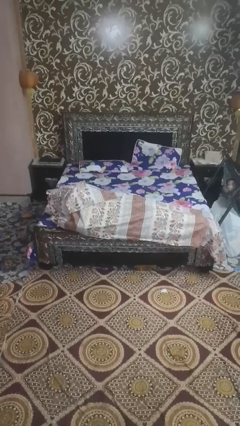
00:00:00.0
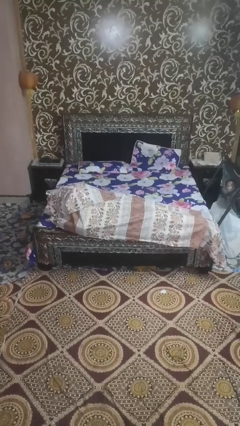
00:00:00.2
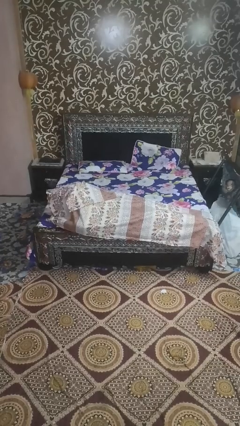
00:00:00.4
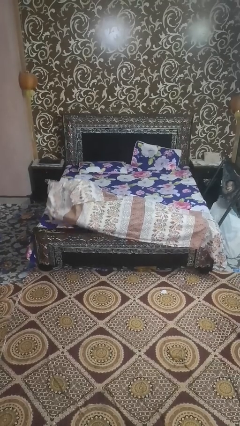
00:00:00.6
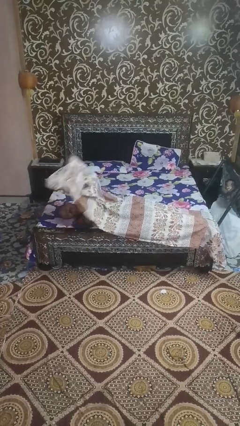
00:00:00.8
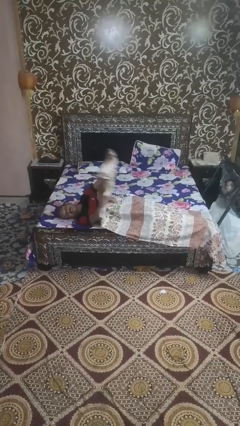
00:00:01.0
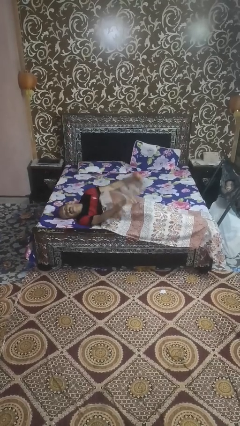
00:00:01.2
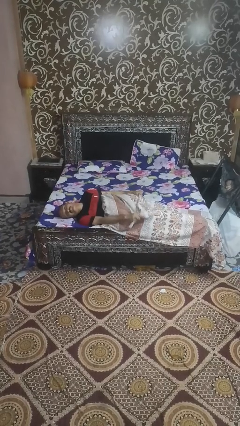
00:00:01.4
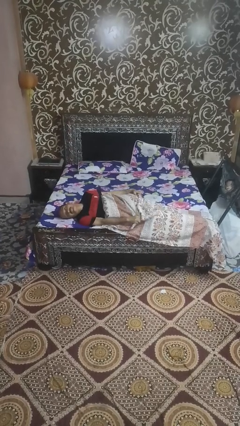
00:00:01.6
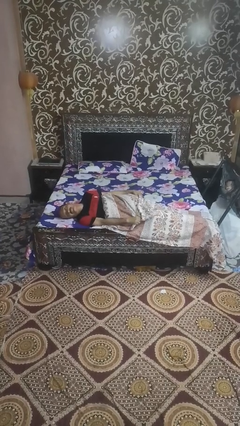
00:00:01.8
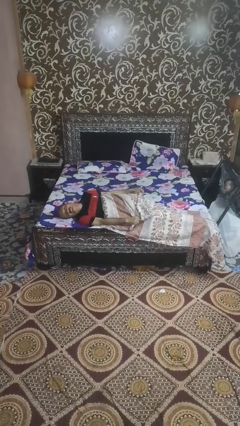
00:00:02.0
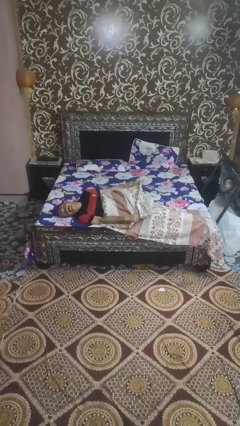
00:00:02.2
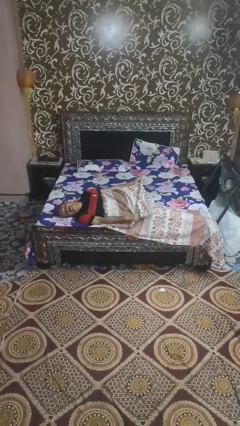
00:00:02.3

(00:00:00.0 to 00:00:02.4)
person uncovers with bedsheets

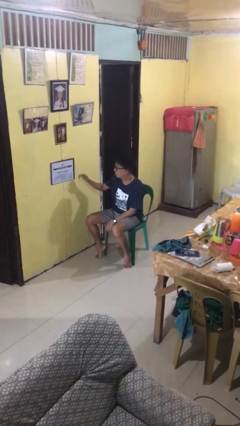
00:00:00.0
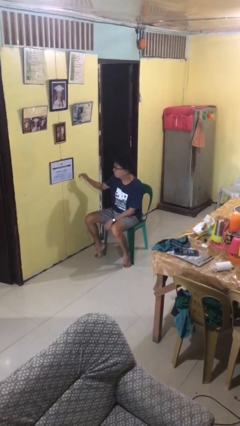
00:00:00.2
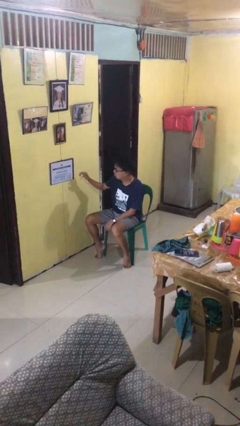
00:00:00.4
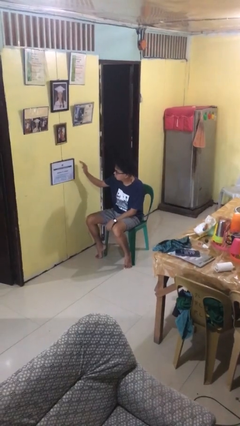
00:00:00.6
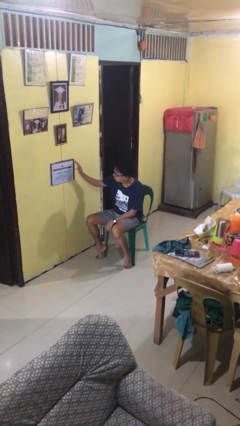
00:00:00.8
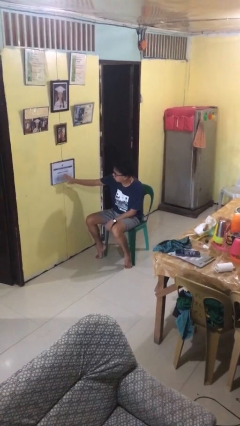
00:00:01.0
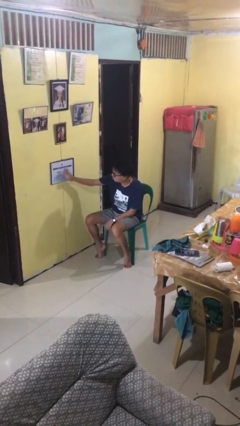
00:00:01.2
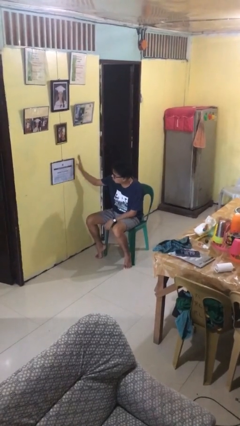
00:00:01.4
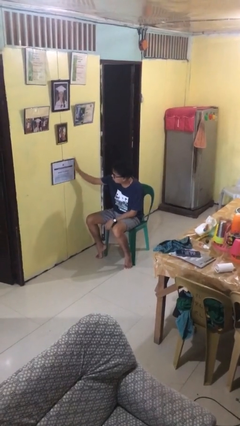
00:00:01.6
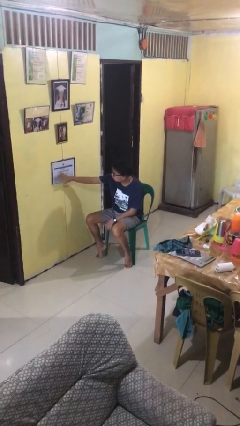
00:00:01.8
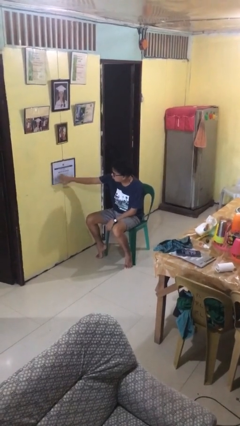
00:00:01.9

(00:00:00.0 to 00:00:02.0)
person waves hand over object

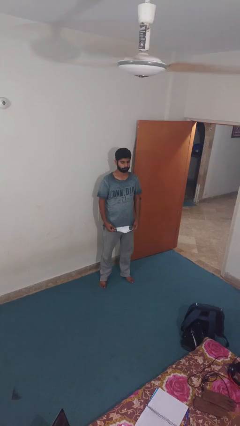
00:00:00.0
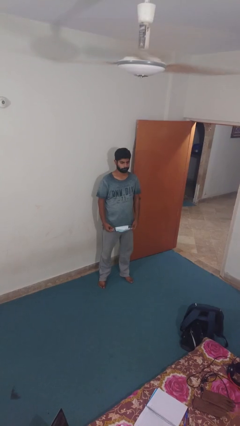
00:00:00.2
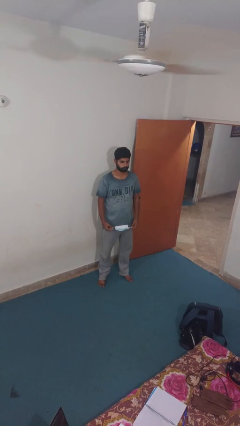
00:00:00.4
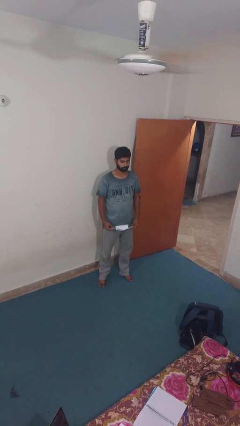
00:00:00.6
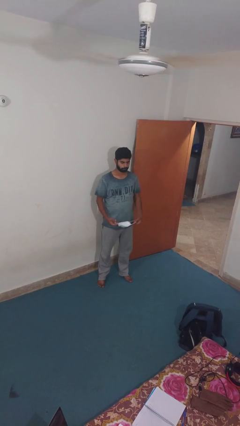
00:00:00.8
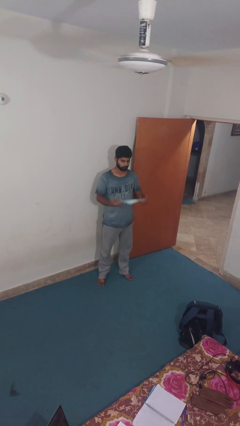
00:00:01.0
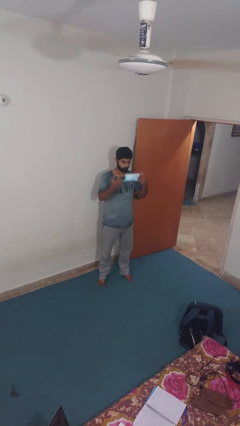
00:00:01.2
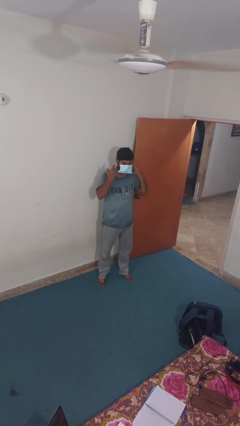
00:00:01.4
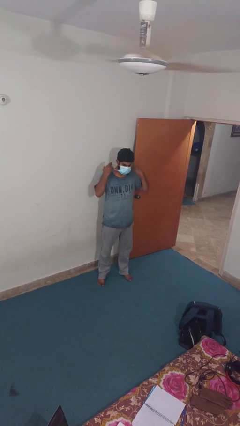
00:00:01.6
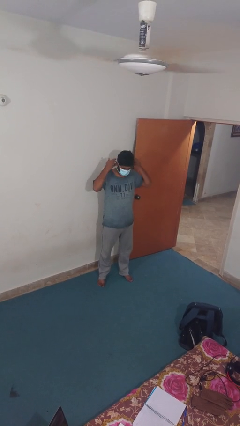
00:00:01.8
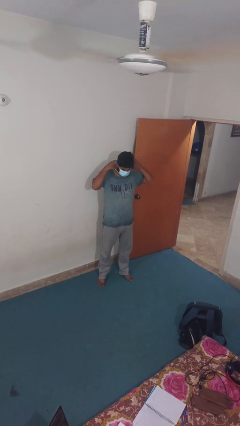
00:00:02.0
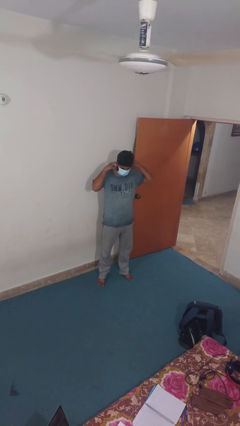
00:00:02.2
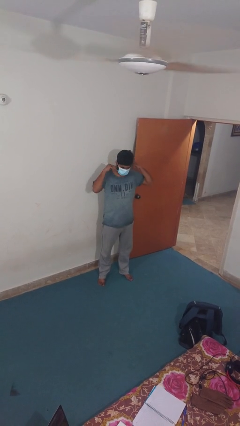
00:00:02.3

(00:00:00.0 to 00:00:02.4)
person puts on facemask

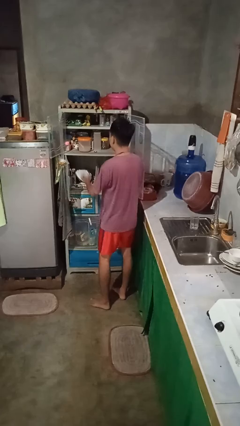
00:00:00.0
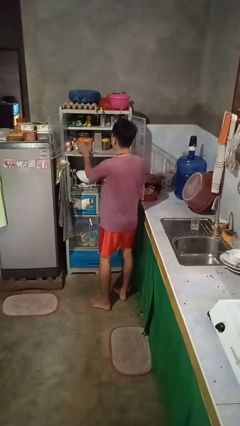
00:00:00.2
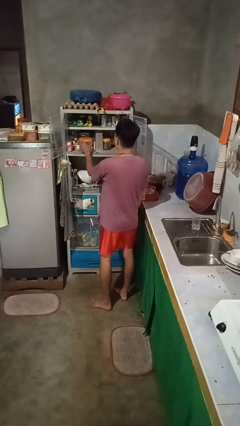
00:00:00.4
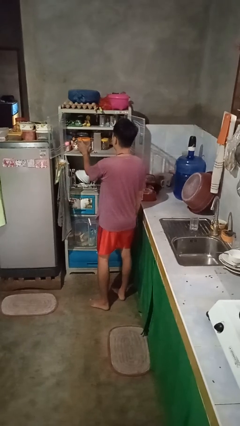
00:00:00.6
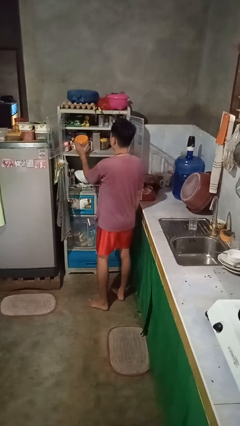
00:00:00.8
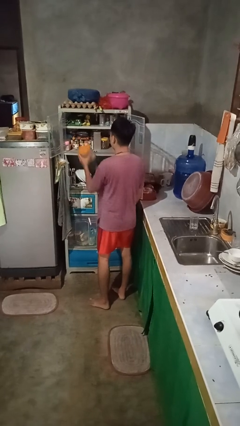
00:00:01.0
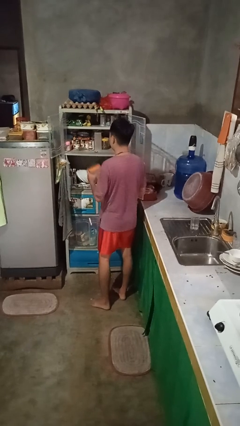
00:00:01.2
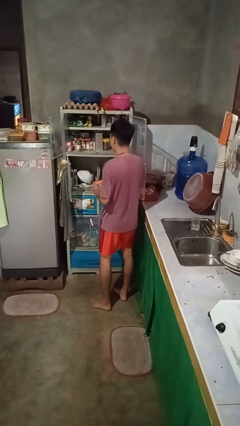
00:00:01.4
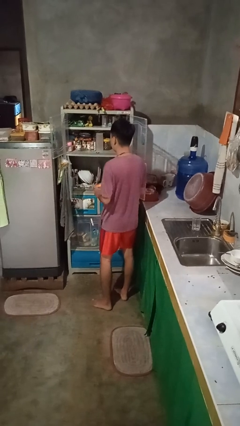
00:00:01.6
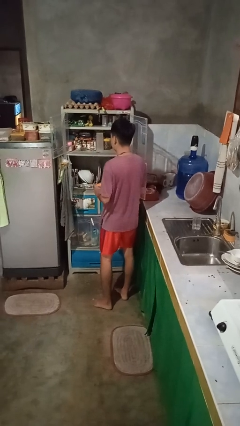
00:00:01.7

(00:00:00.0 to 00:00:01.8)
person takes object from cabinet

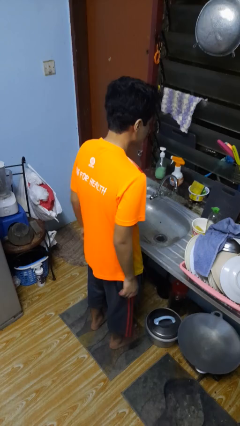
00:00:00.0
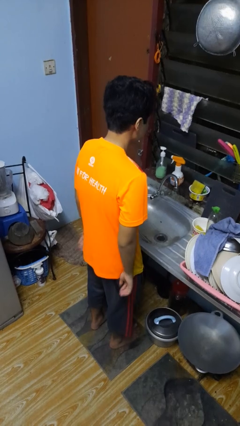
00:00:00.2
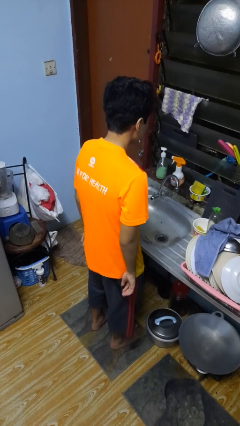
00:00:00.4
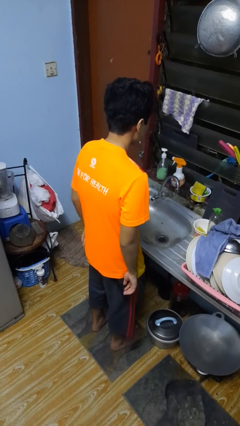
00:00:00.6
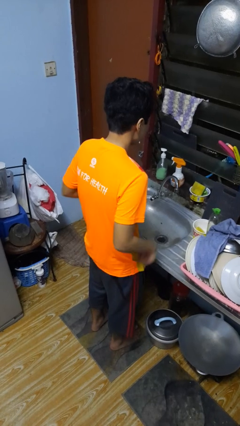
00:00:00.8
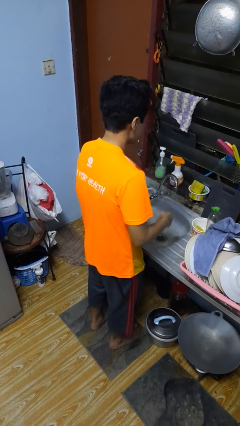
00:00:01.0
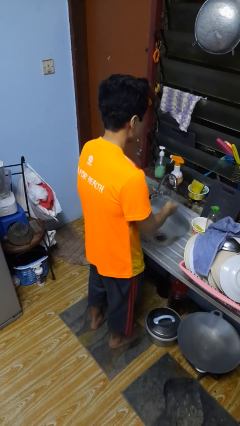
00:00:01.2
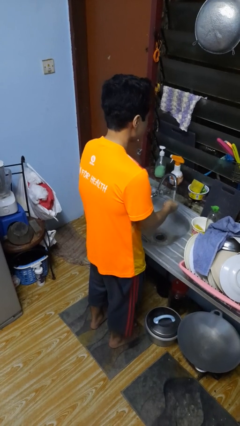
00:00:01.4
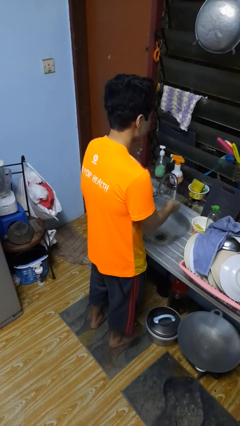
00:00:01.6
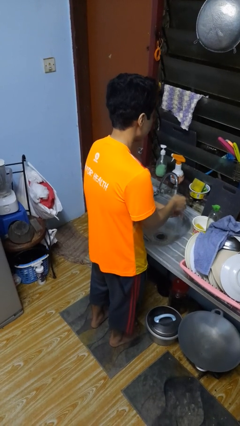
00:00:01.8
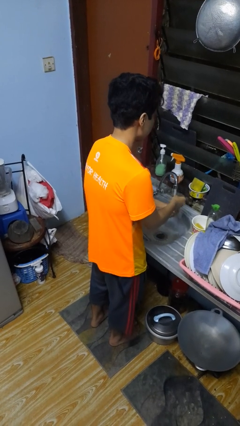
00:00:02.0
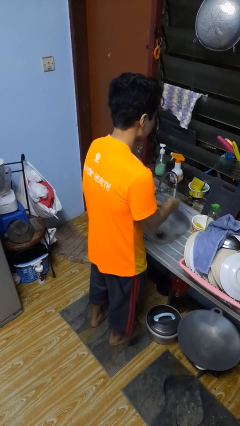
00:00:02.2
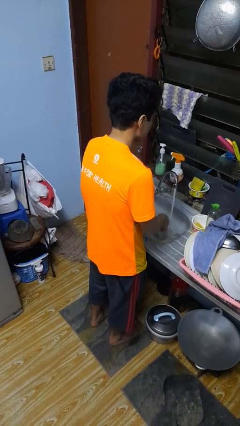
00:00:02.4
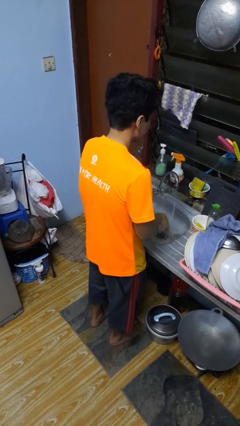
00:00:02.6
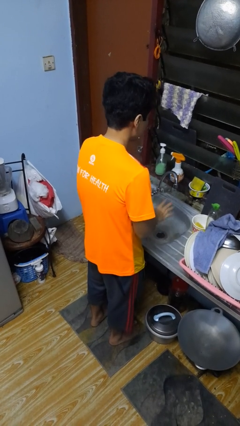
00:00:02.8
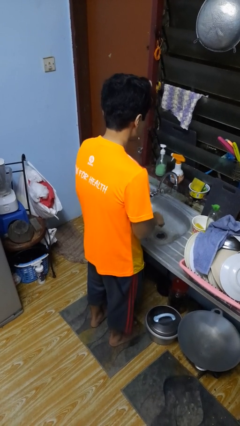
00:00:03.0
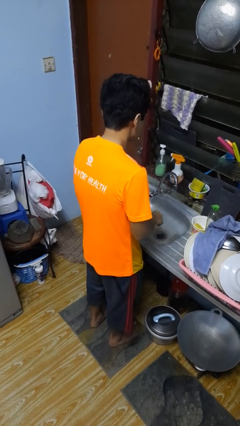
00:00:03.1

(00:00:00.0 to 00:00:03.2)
person washes hands

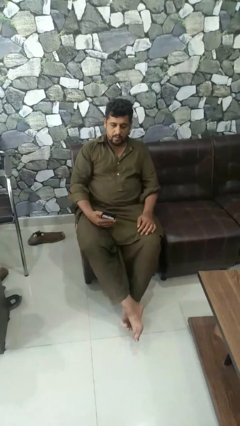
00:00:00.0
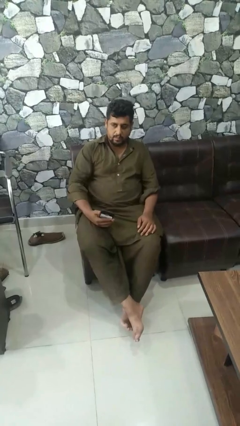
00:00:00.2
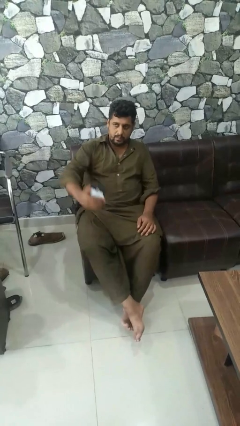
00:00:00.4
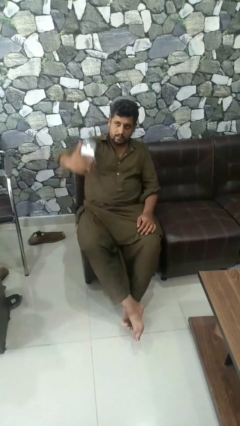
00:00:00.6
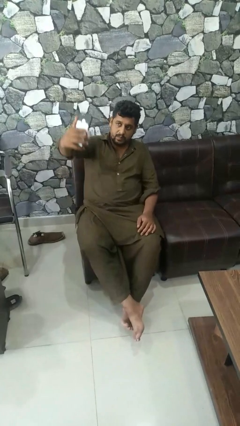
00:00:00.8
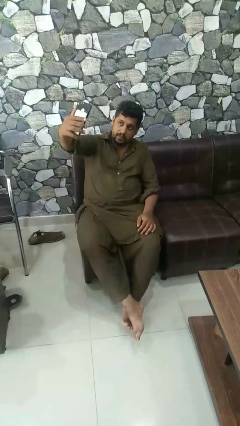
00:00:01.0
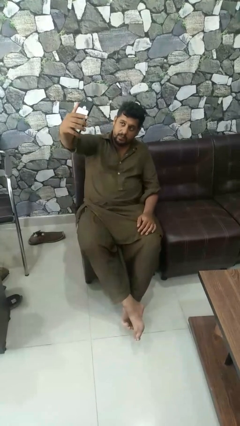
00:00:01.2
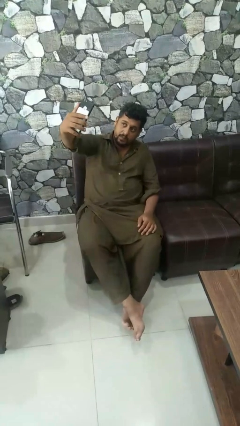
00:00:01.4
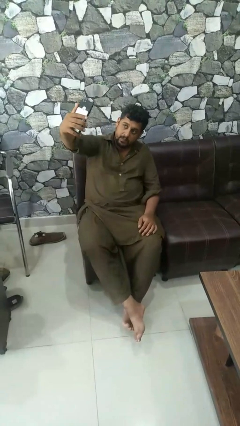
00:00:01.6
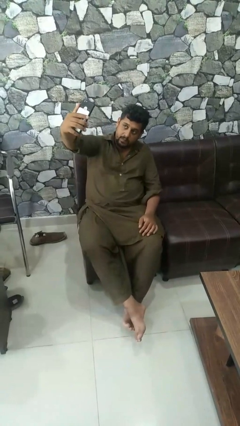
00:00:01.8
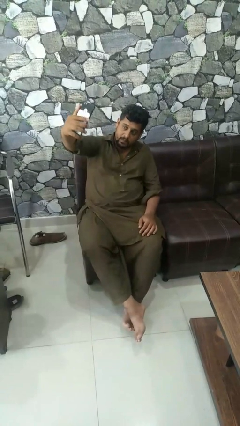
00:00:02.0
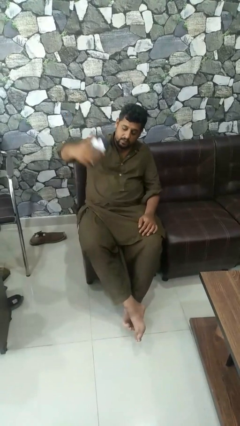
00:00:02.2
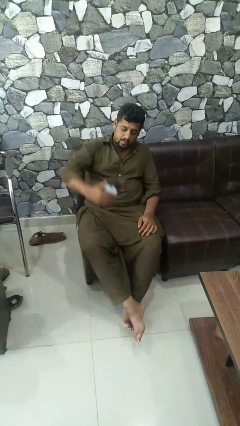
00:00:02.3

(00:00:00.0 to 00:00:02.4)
person takes selfie

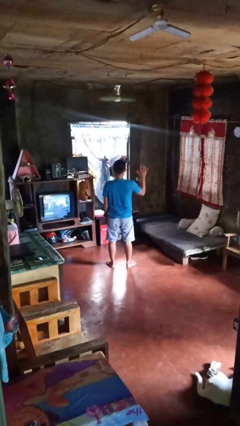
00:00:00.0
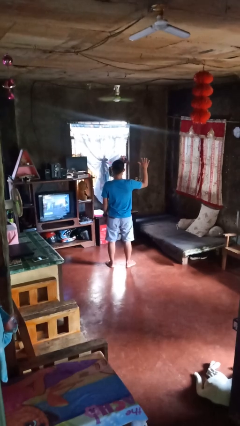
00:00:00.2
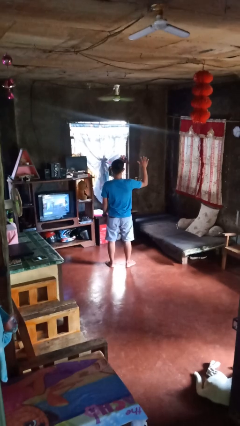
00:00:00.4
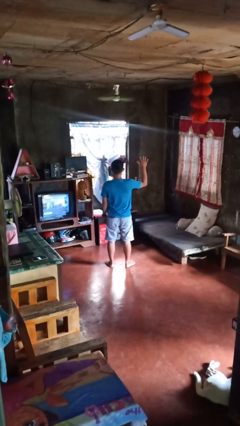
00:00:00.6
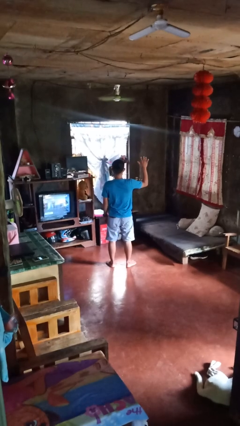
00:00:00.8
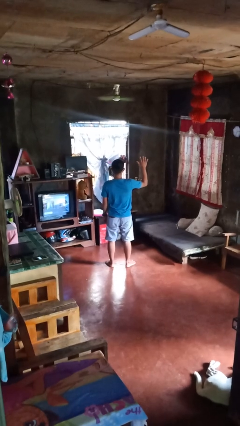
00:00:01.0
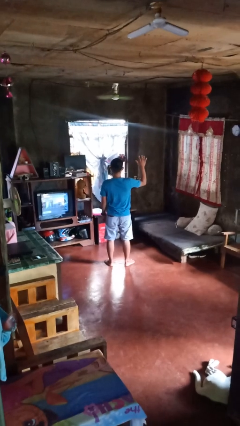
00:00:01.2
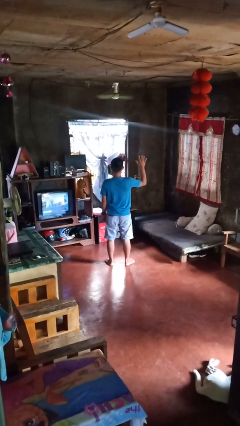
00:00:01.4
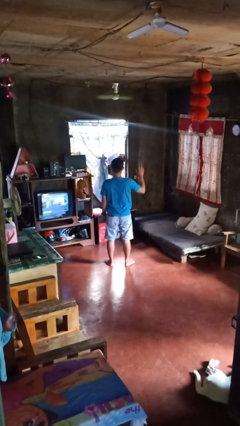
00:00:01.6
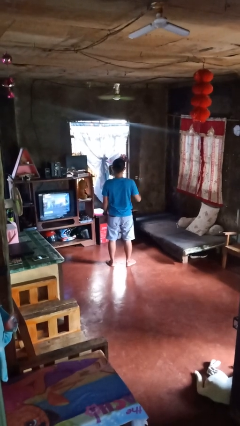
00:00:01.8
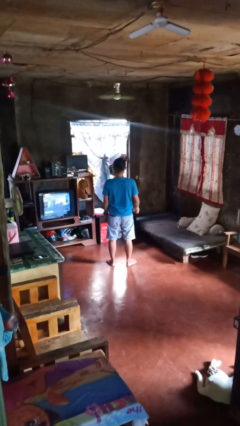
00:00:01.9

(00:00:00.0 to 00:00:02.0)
person gestures number five

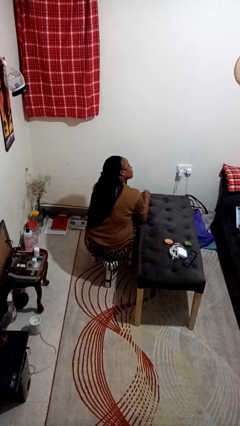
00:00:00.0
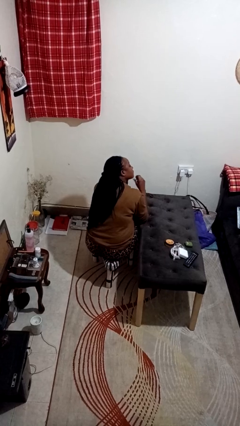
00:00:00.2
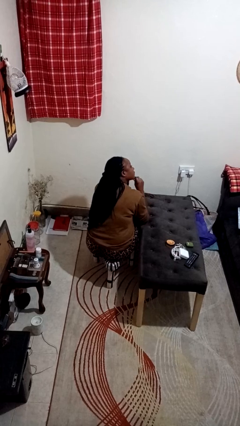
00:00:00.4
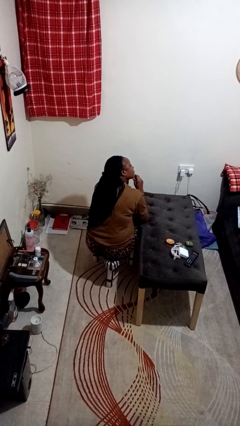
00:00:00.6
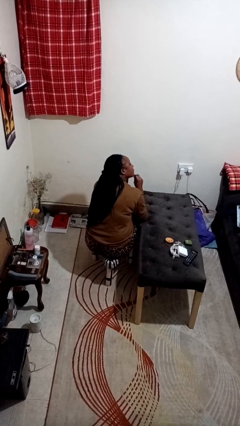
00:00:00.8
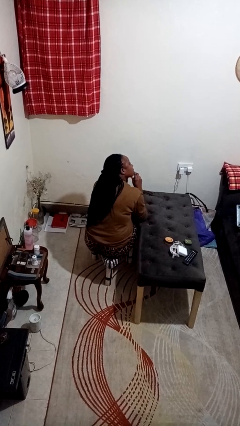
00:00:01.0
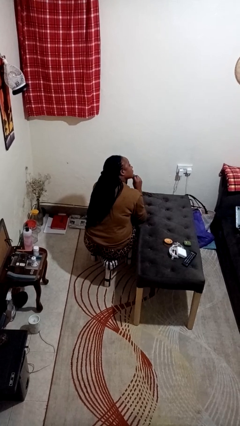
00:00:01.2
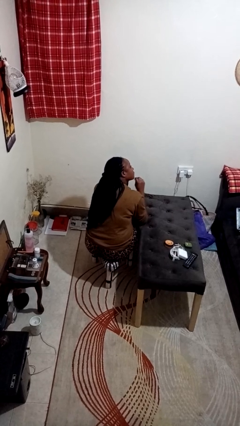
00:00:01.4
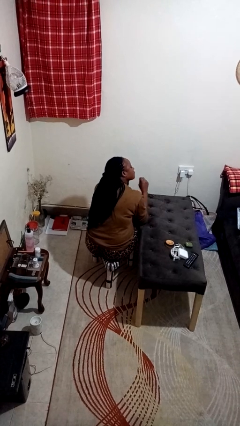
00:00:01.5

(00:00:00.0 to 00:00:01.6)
person strokes chin
